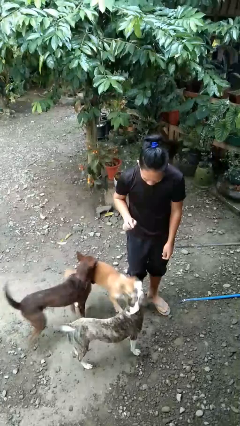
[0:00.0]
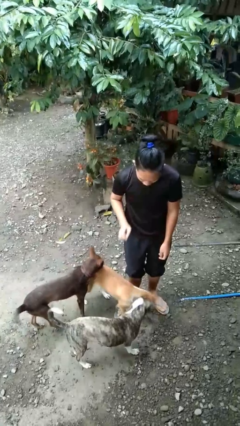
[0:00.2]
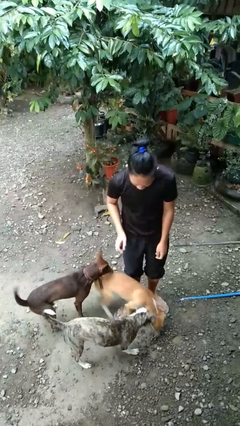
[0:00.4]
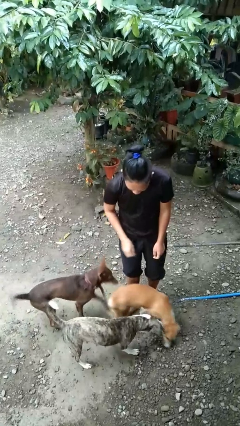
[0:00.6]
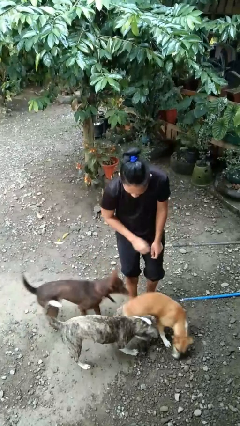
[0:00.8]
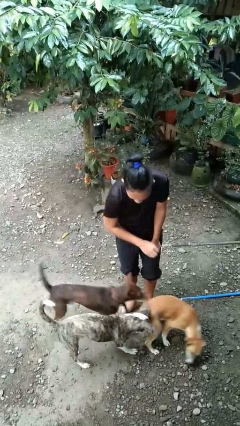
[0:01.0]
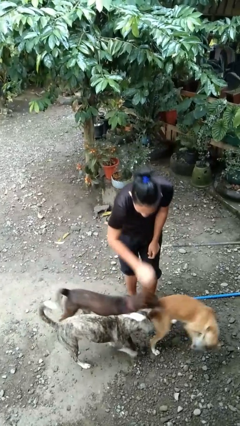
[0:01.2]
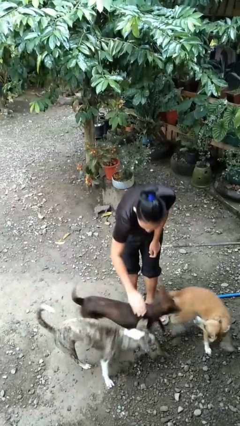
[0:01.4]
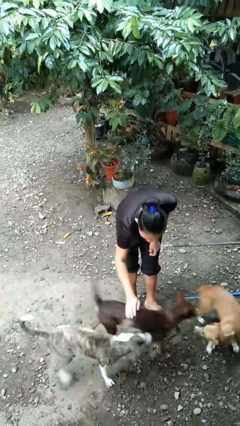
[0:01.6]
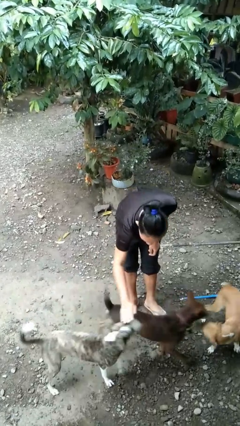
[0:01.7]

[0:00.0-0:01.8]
person pets dog

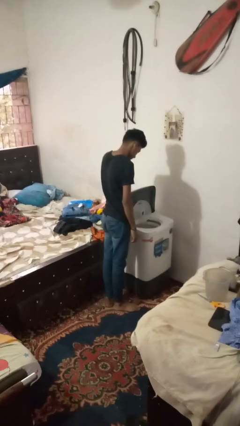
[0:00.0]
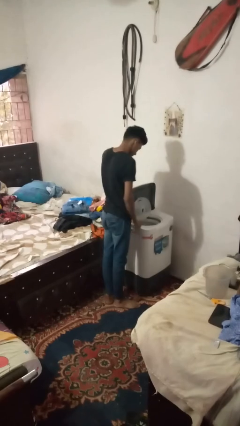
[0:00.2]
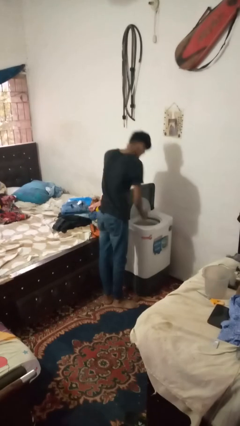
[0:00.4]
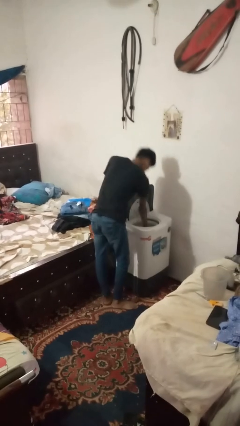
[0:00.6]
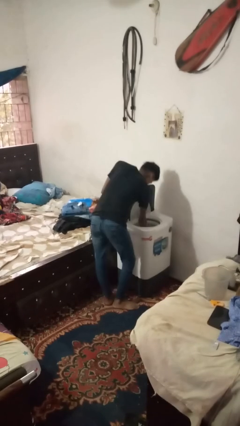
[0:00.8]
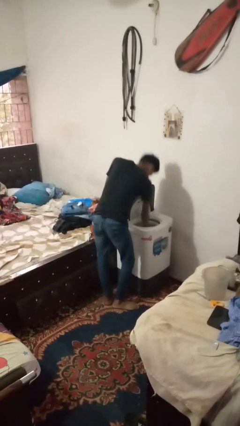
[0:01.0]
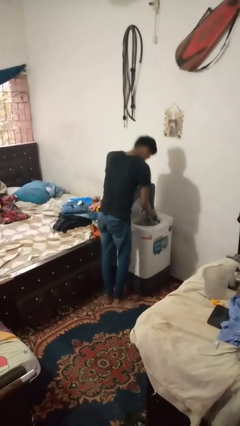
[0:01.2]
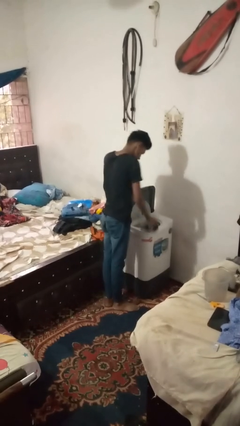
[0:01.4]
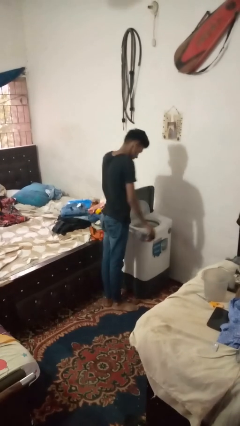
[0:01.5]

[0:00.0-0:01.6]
person unloads dryer

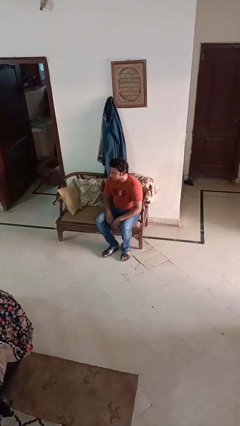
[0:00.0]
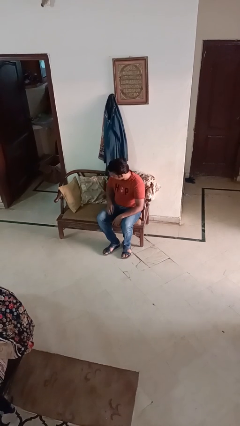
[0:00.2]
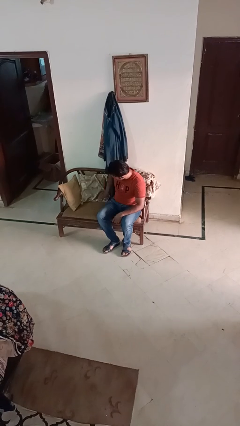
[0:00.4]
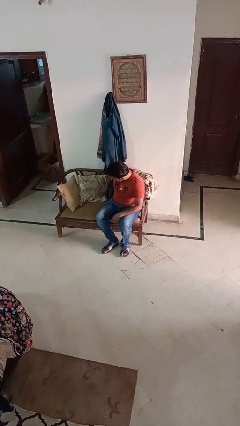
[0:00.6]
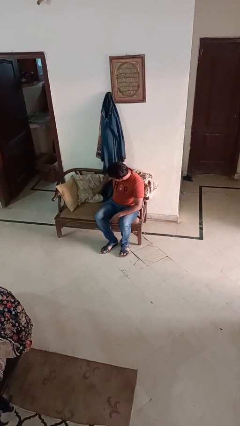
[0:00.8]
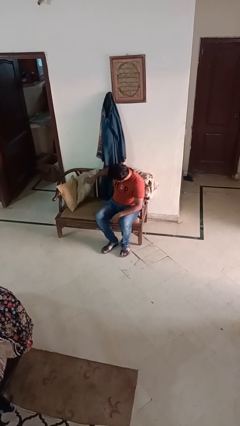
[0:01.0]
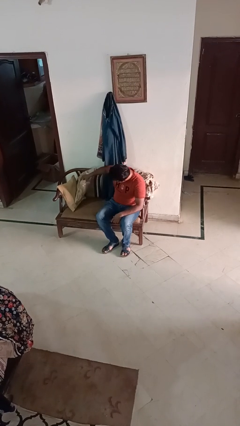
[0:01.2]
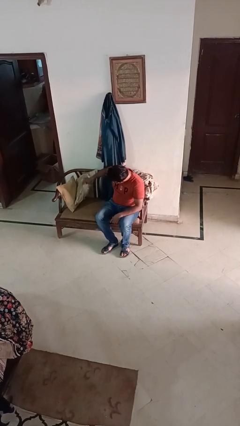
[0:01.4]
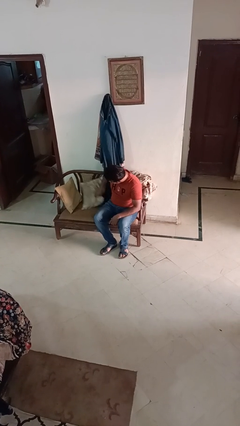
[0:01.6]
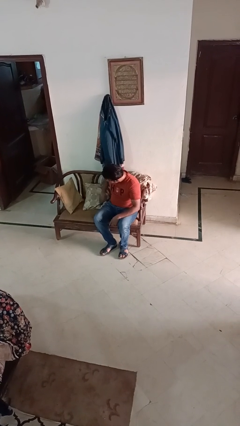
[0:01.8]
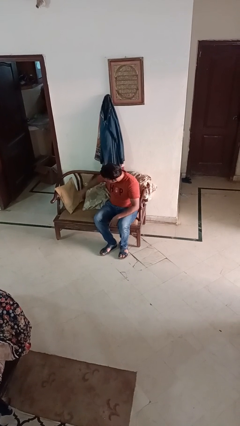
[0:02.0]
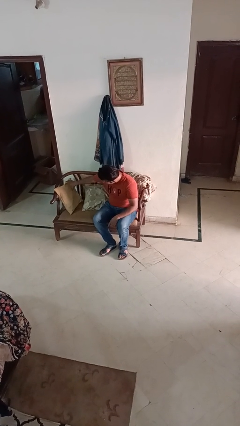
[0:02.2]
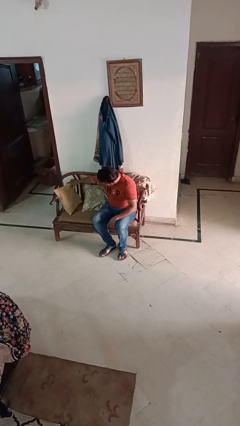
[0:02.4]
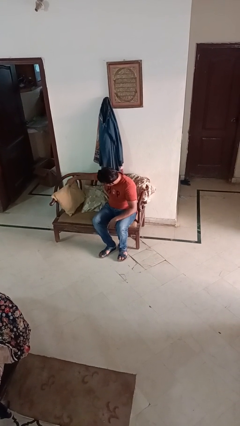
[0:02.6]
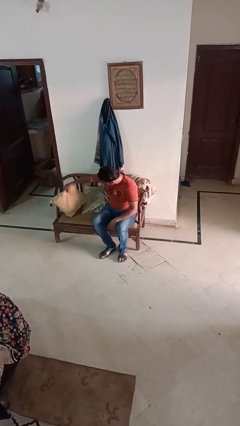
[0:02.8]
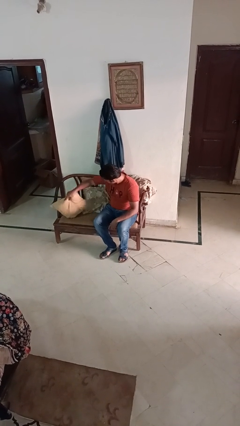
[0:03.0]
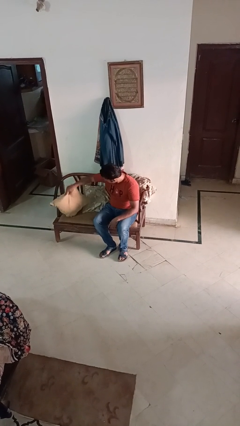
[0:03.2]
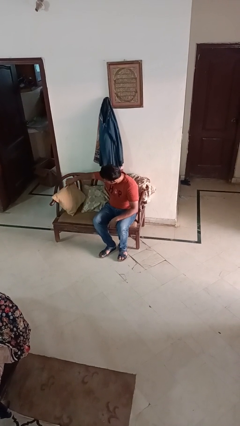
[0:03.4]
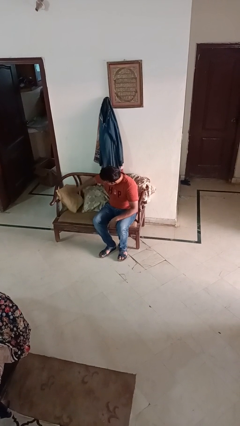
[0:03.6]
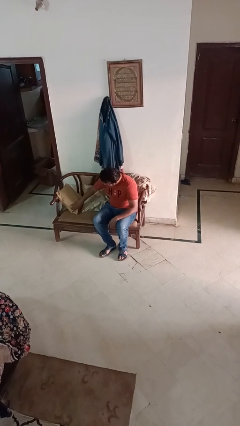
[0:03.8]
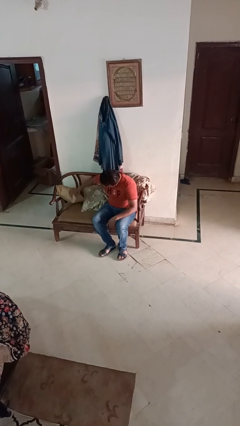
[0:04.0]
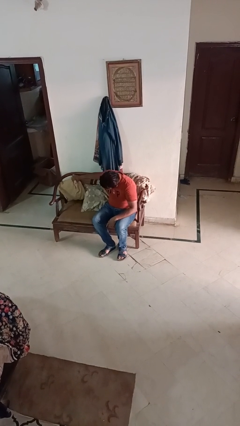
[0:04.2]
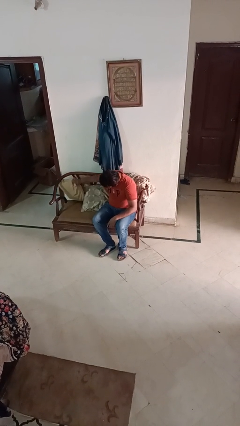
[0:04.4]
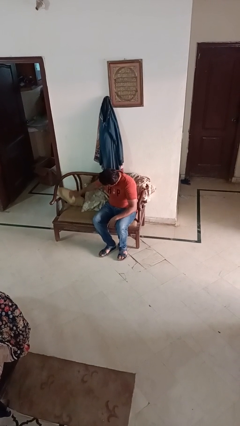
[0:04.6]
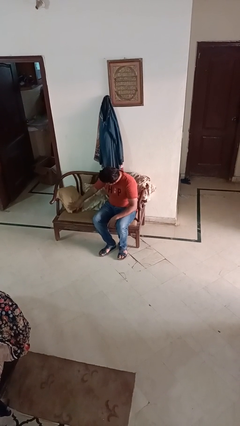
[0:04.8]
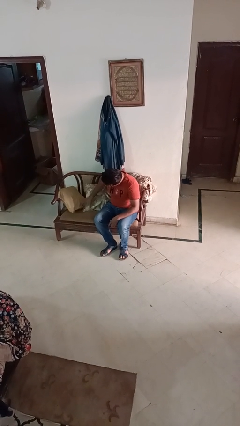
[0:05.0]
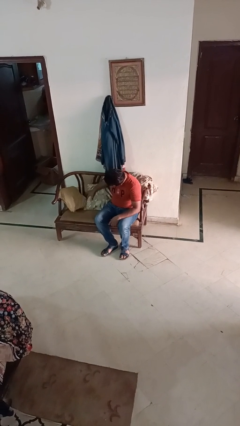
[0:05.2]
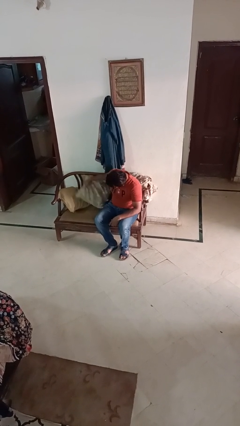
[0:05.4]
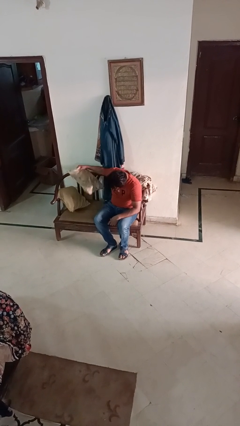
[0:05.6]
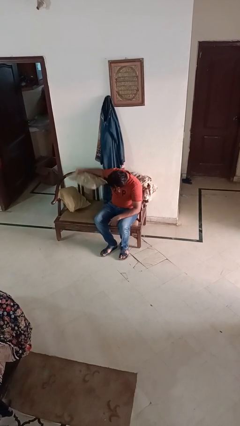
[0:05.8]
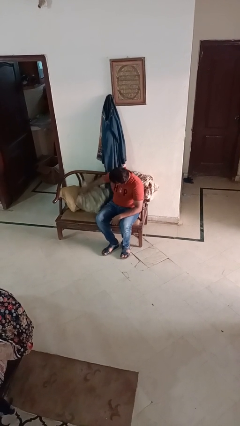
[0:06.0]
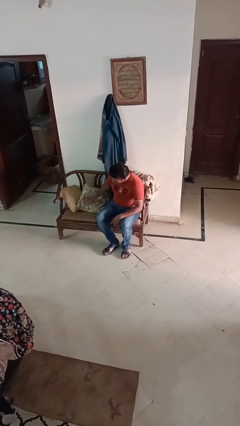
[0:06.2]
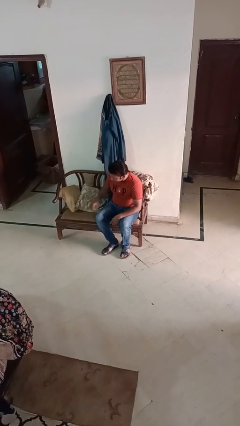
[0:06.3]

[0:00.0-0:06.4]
person searches in couch

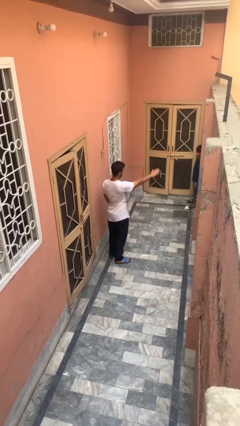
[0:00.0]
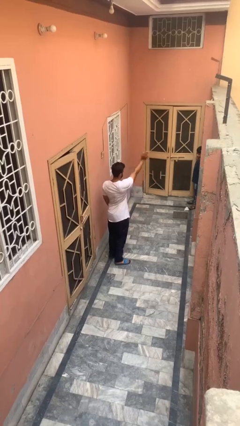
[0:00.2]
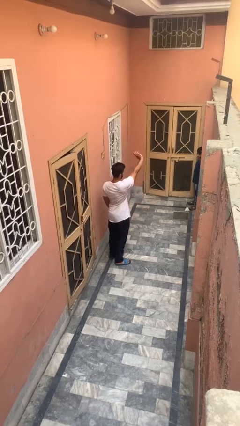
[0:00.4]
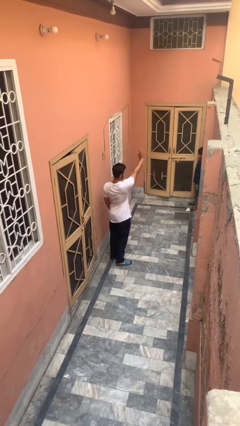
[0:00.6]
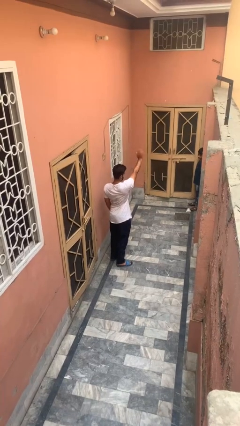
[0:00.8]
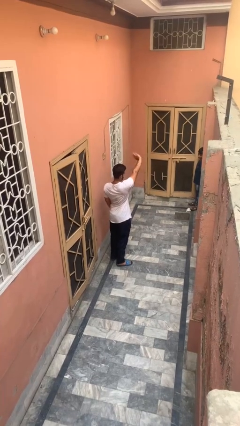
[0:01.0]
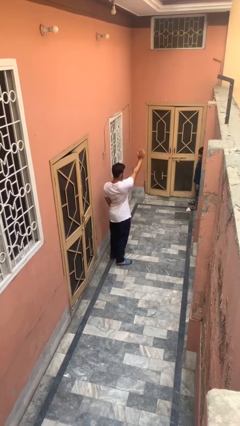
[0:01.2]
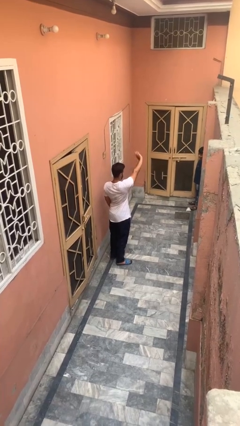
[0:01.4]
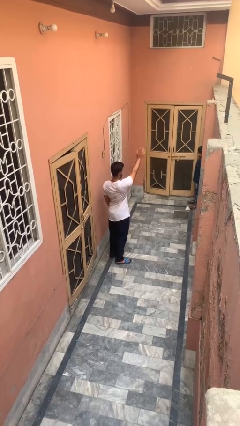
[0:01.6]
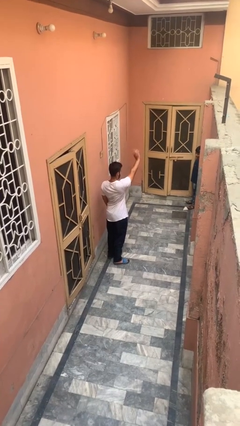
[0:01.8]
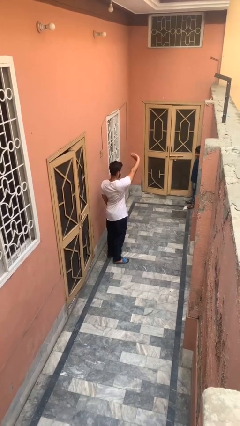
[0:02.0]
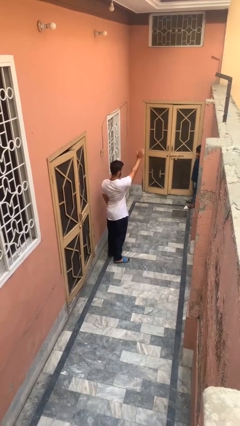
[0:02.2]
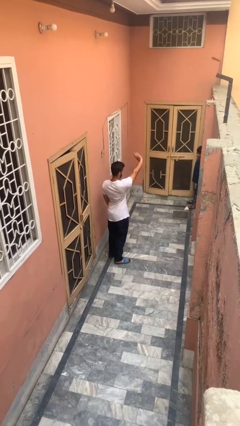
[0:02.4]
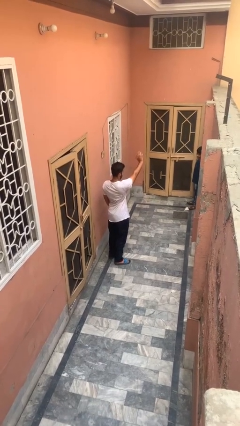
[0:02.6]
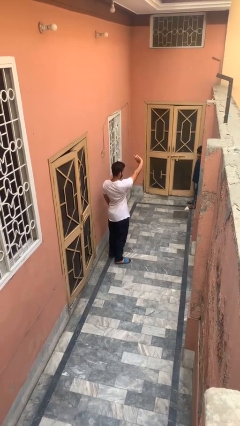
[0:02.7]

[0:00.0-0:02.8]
person waves at person

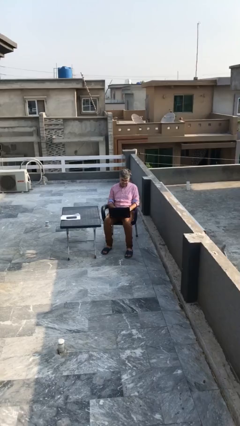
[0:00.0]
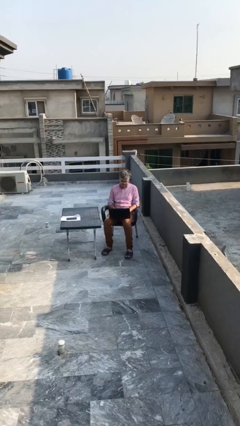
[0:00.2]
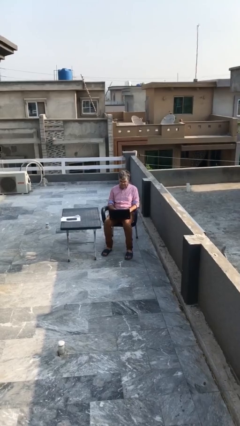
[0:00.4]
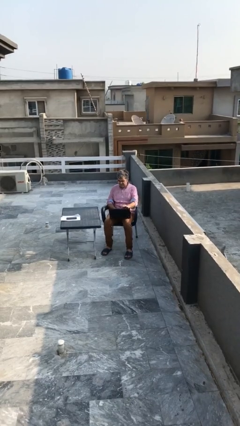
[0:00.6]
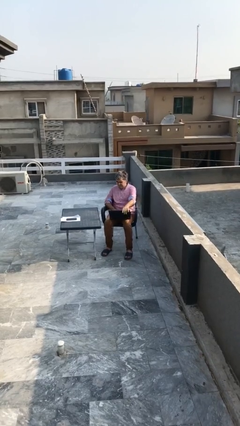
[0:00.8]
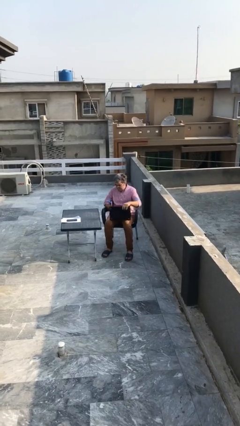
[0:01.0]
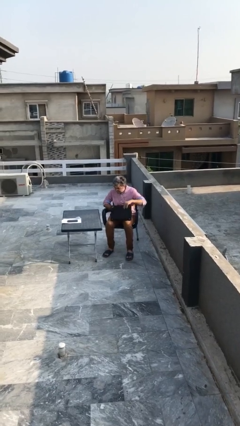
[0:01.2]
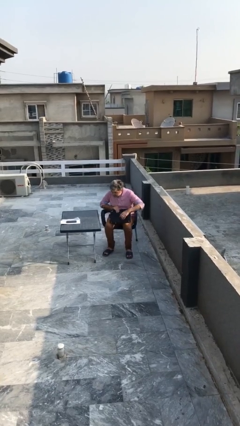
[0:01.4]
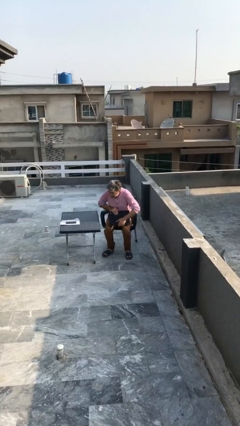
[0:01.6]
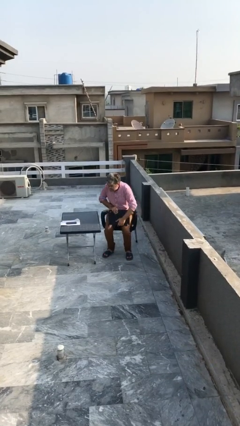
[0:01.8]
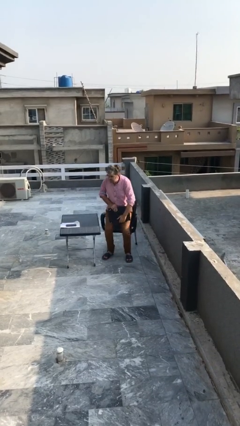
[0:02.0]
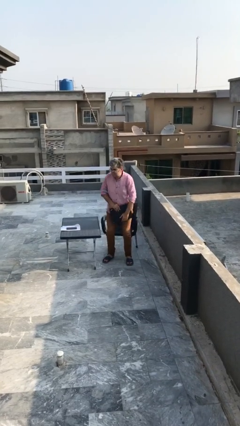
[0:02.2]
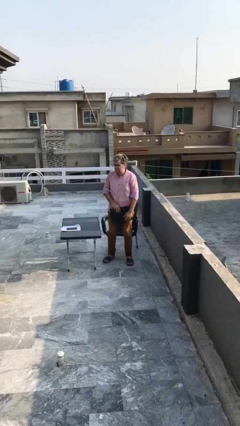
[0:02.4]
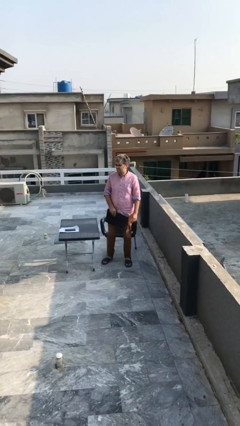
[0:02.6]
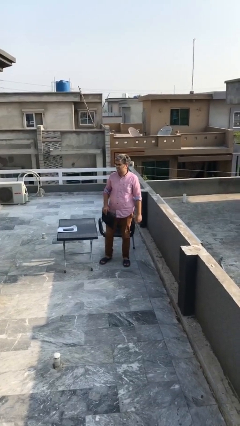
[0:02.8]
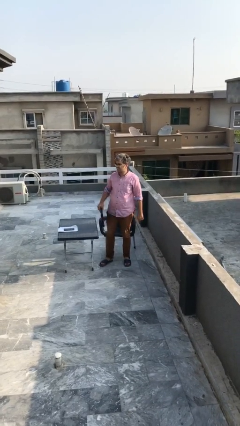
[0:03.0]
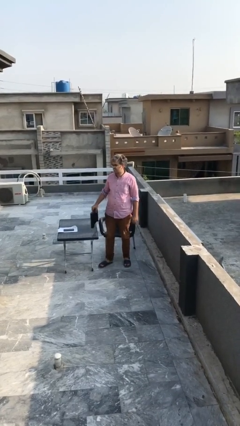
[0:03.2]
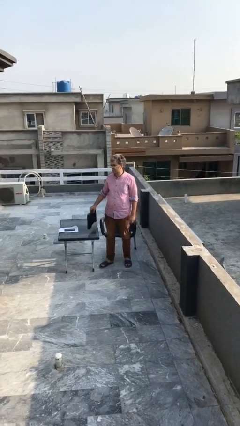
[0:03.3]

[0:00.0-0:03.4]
person stands up

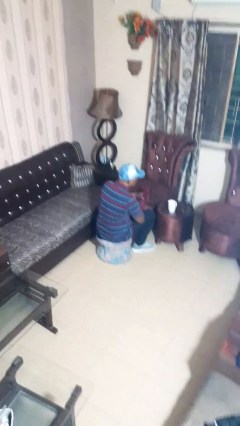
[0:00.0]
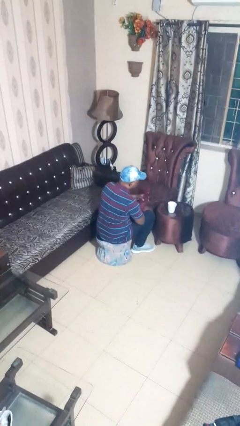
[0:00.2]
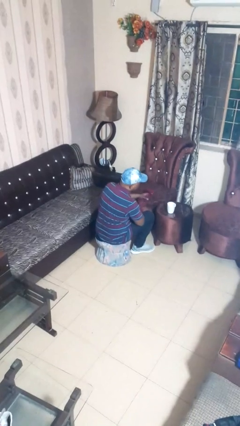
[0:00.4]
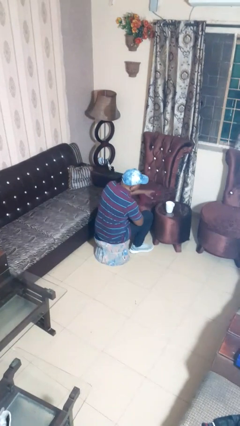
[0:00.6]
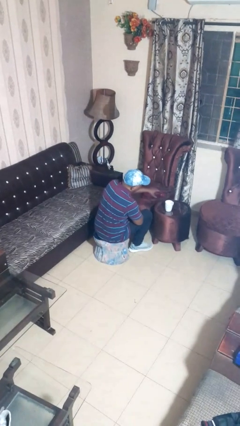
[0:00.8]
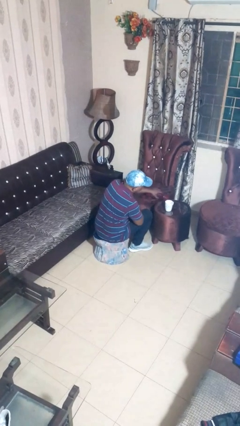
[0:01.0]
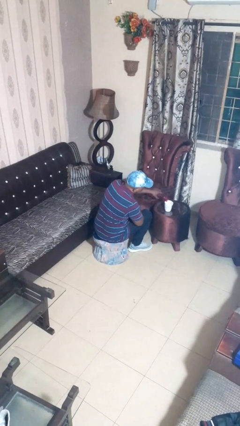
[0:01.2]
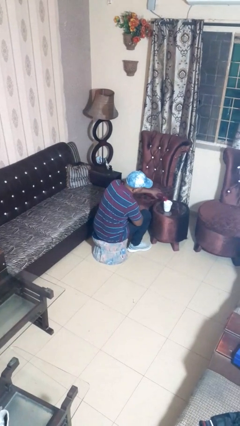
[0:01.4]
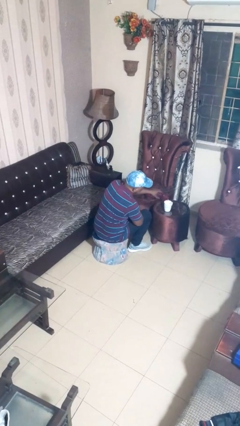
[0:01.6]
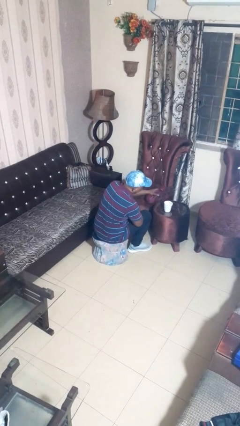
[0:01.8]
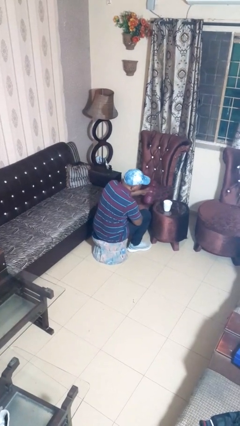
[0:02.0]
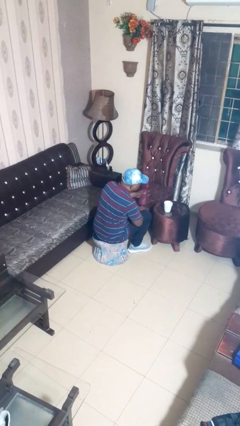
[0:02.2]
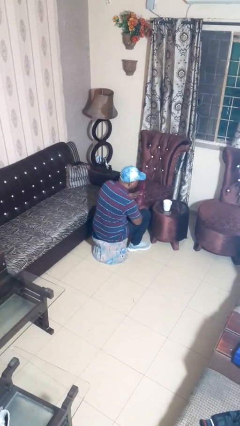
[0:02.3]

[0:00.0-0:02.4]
person pours liquid into cup
